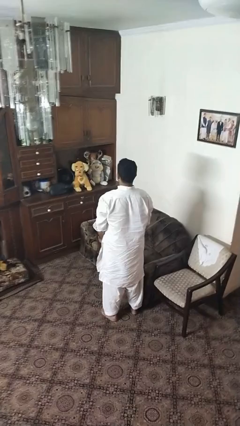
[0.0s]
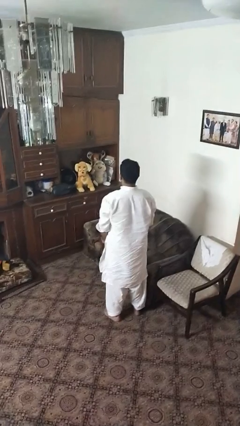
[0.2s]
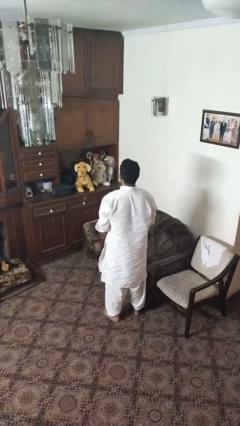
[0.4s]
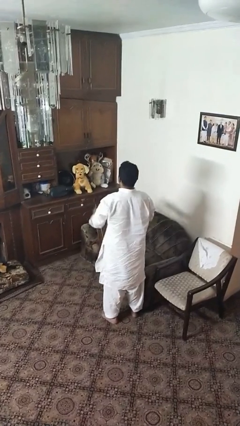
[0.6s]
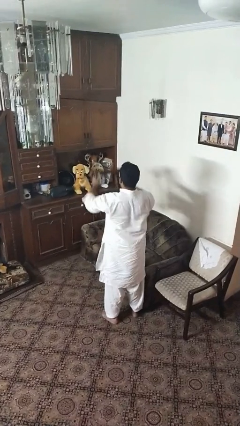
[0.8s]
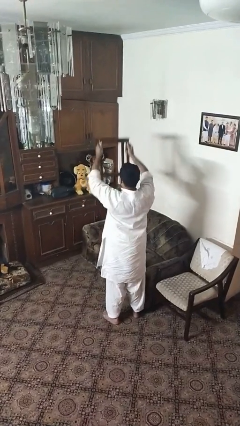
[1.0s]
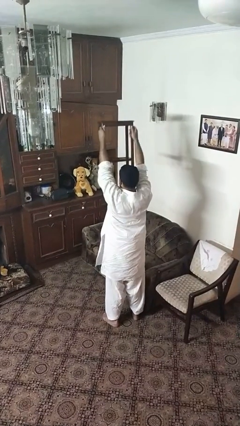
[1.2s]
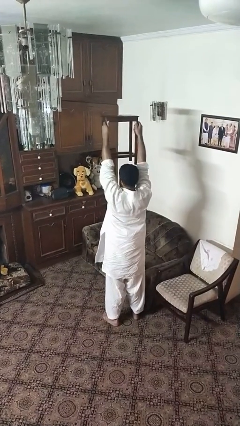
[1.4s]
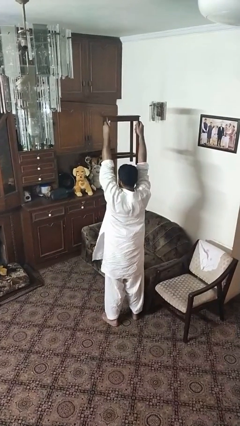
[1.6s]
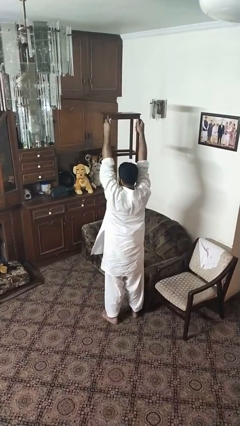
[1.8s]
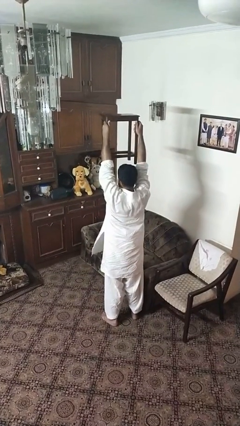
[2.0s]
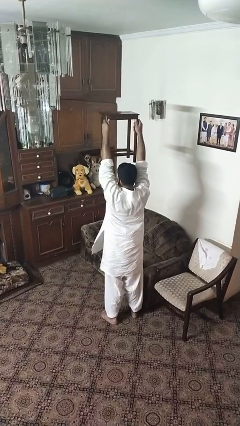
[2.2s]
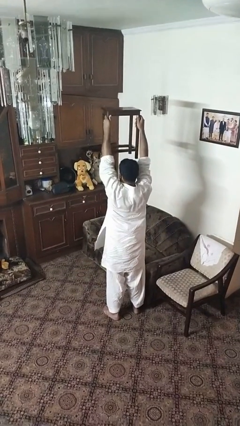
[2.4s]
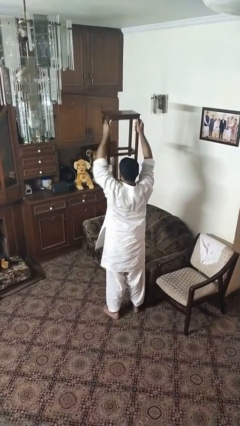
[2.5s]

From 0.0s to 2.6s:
person holds object above head

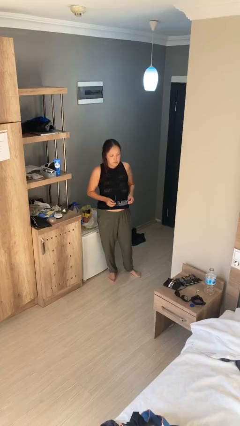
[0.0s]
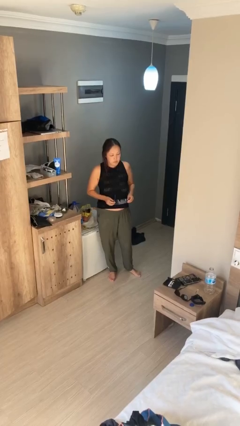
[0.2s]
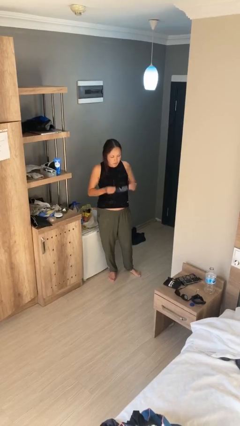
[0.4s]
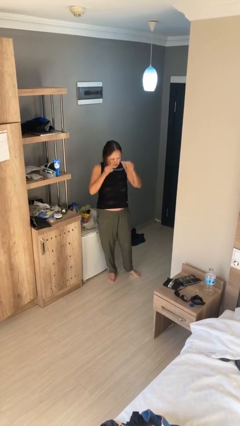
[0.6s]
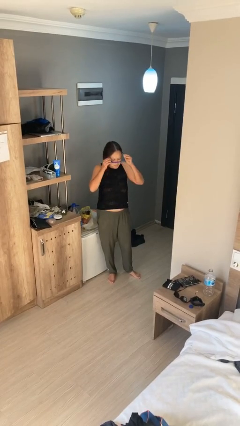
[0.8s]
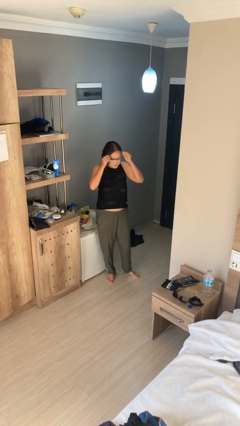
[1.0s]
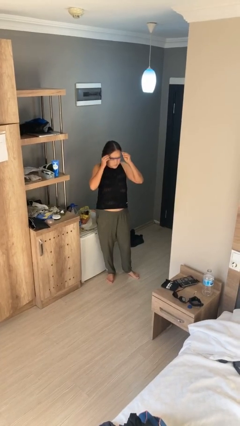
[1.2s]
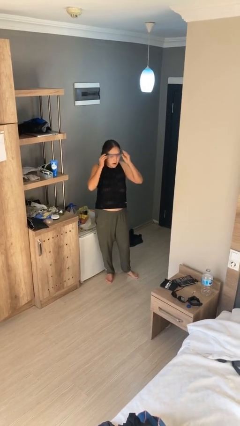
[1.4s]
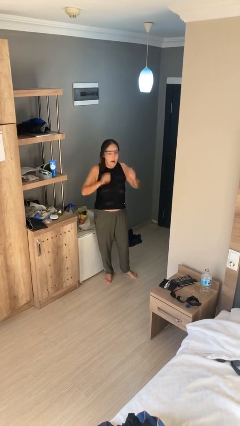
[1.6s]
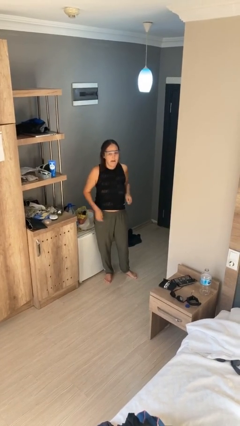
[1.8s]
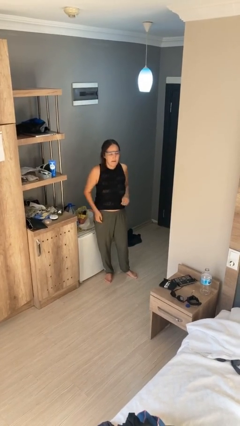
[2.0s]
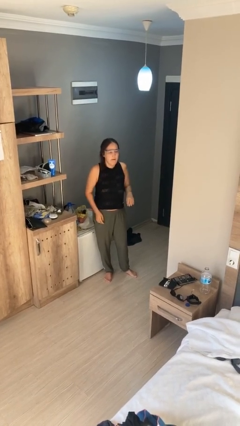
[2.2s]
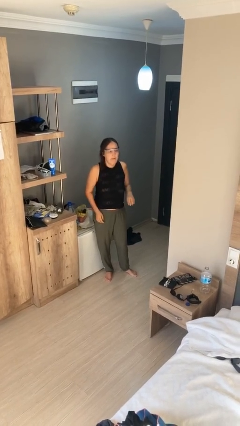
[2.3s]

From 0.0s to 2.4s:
person puts on glasses

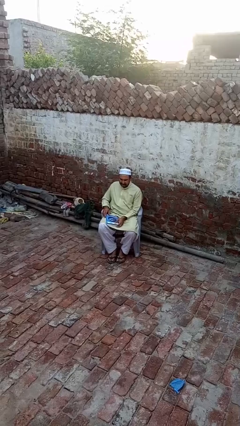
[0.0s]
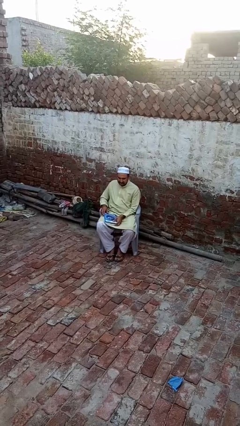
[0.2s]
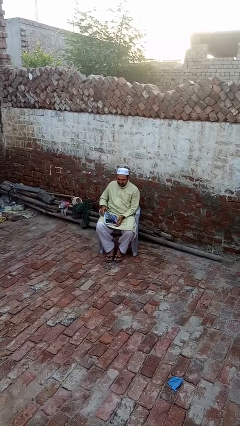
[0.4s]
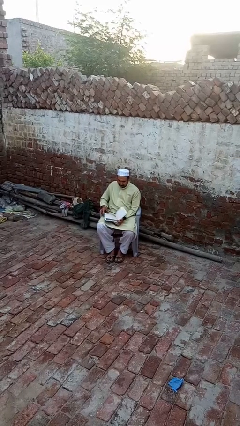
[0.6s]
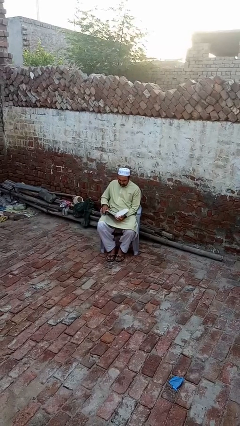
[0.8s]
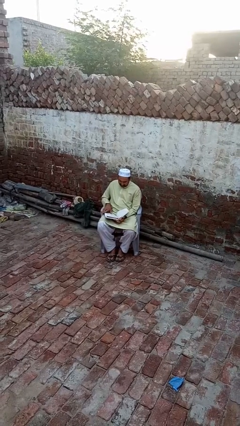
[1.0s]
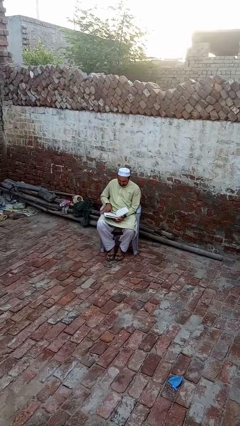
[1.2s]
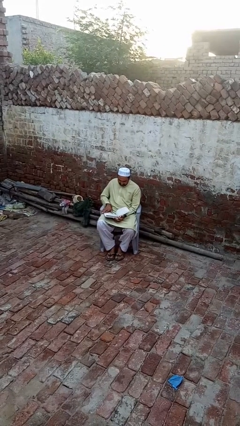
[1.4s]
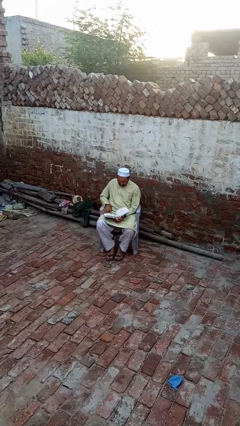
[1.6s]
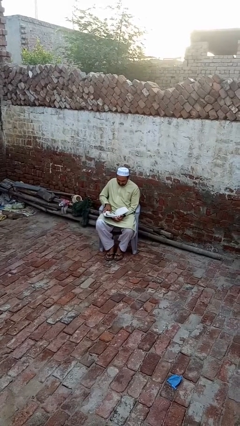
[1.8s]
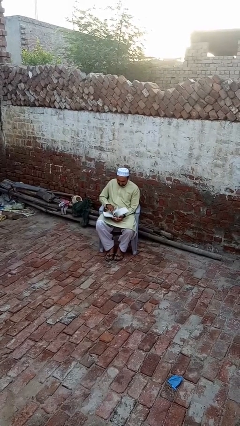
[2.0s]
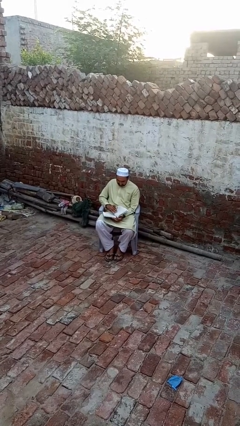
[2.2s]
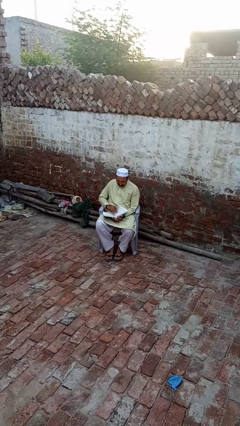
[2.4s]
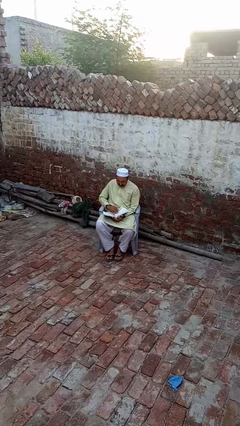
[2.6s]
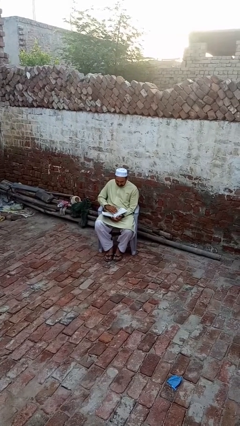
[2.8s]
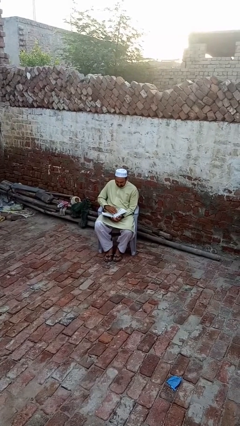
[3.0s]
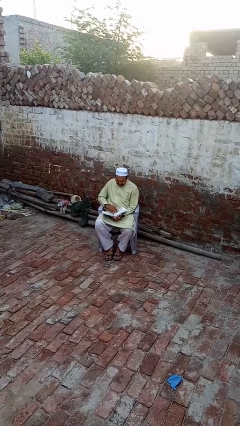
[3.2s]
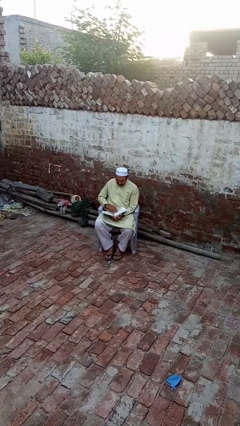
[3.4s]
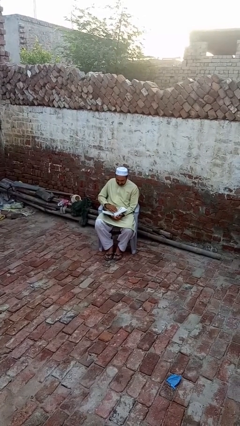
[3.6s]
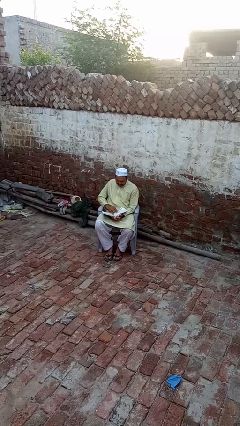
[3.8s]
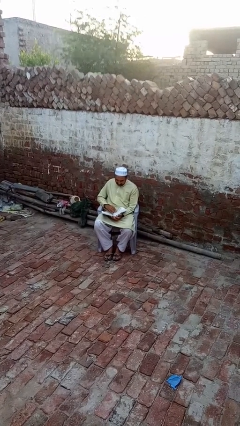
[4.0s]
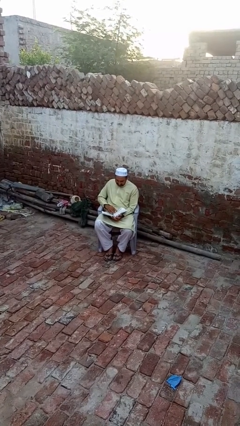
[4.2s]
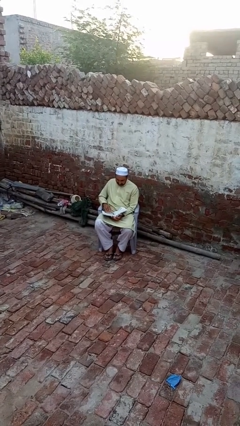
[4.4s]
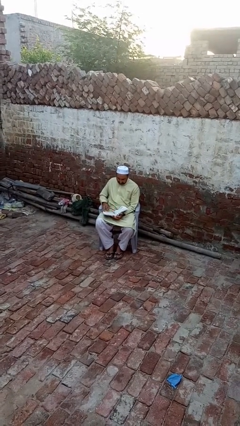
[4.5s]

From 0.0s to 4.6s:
person reads book

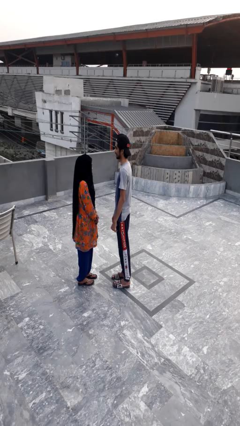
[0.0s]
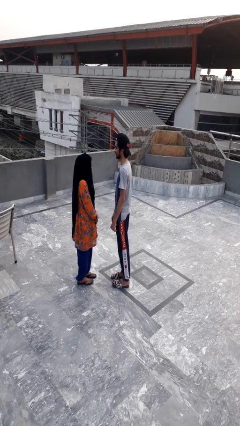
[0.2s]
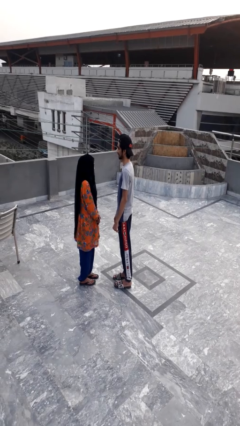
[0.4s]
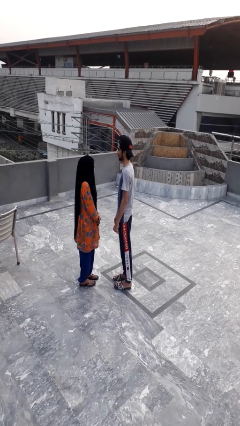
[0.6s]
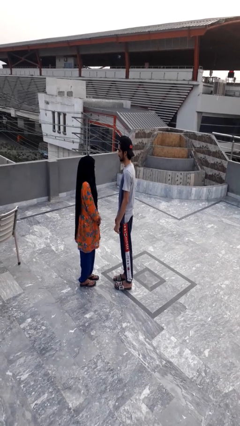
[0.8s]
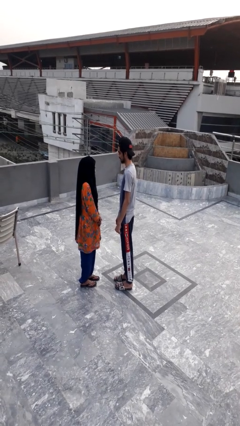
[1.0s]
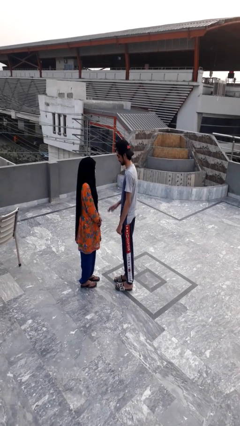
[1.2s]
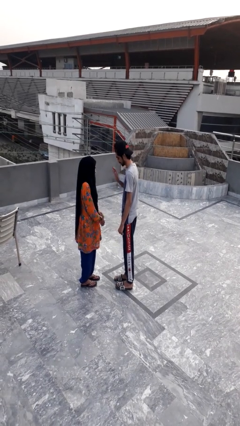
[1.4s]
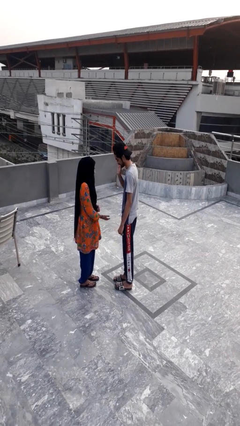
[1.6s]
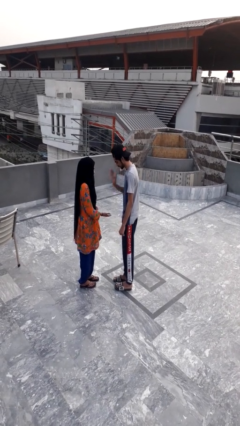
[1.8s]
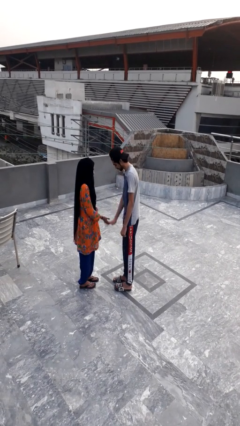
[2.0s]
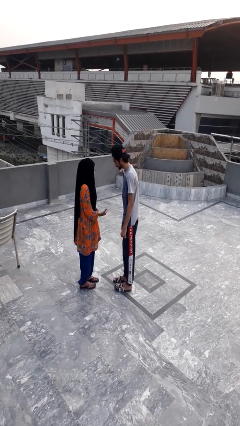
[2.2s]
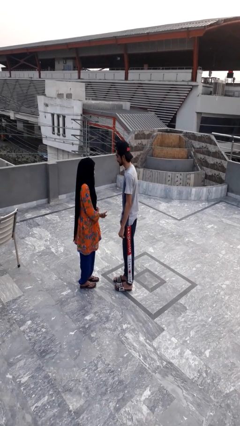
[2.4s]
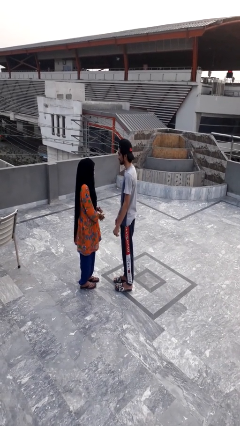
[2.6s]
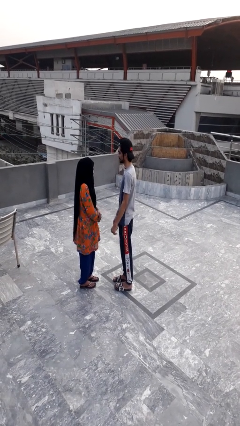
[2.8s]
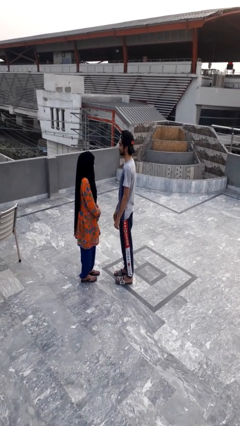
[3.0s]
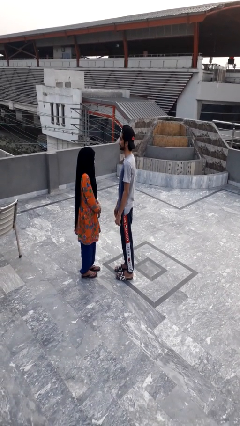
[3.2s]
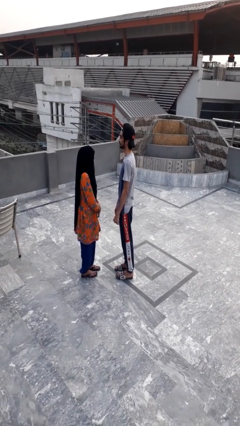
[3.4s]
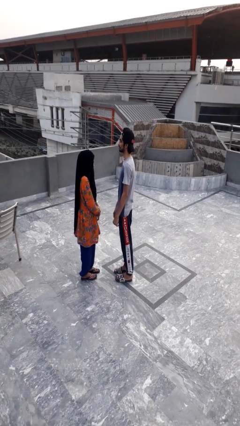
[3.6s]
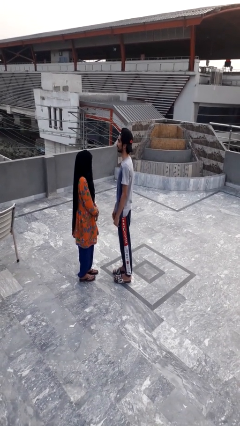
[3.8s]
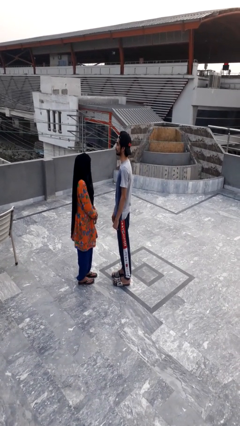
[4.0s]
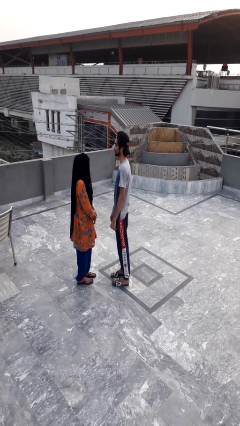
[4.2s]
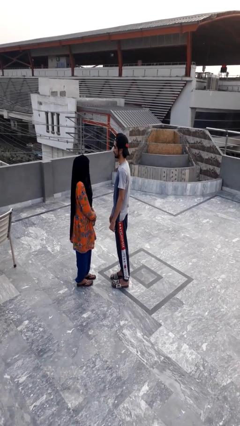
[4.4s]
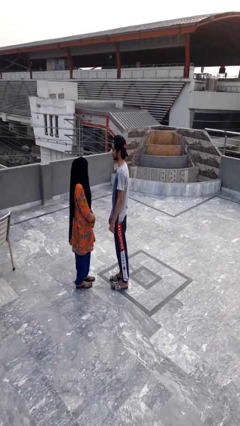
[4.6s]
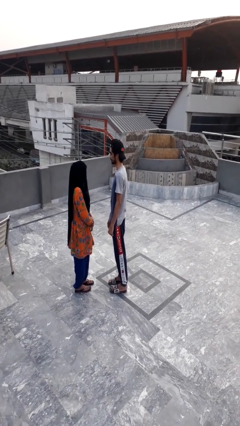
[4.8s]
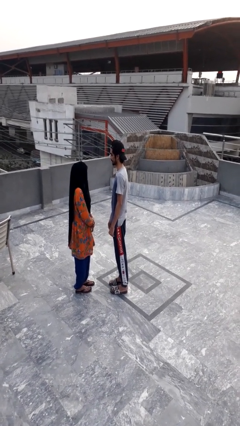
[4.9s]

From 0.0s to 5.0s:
person highfives hand

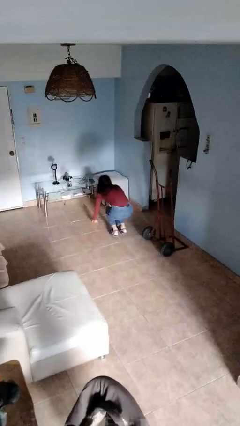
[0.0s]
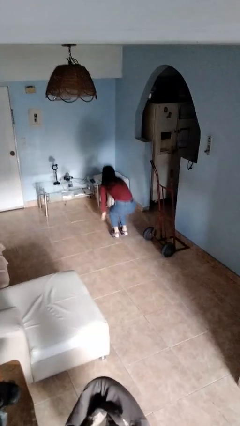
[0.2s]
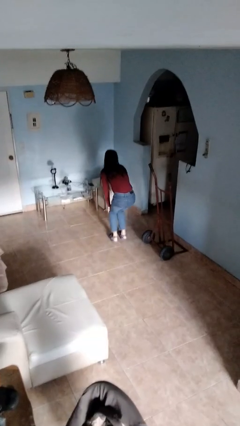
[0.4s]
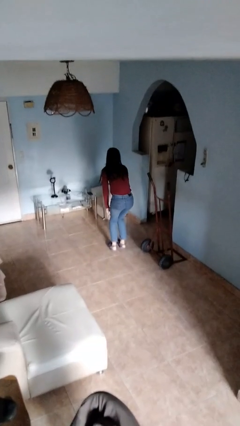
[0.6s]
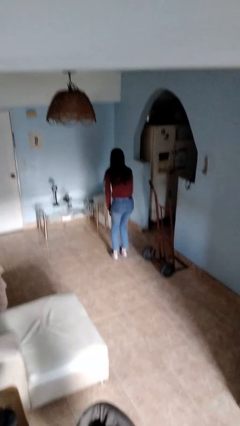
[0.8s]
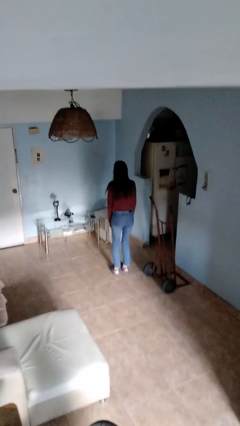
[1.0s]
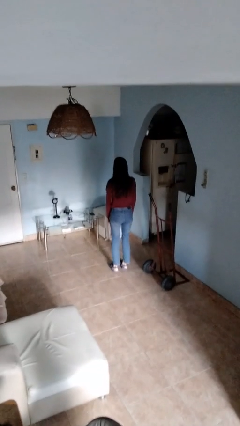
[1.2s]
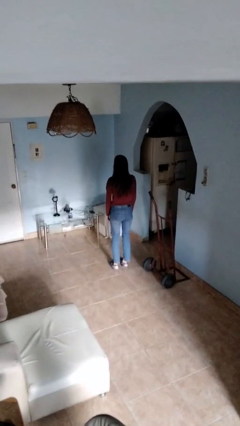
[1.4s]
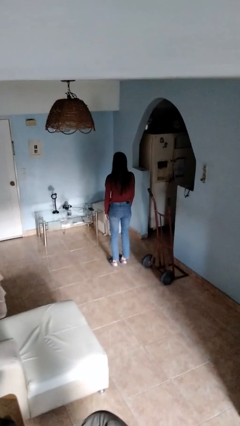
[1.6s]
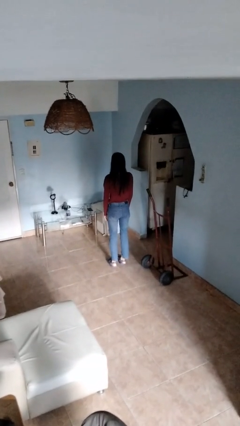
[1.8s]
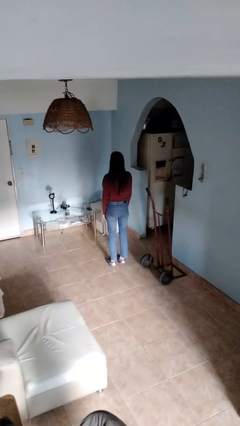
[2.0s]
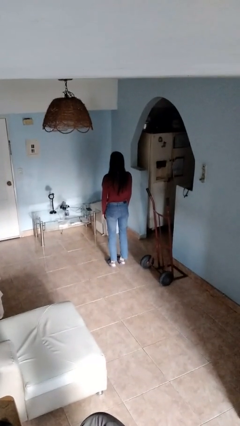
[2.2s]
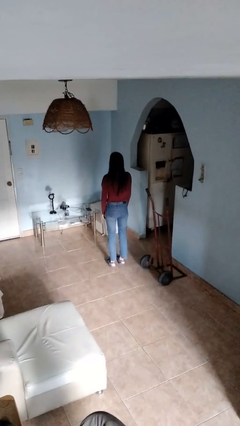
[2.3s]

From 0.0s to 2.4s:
person stands up from floor
